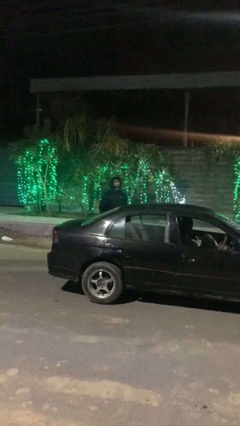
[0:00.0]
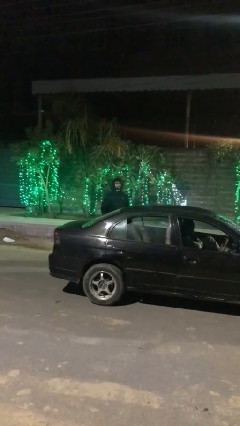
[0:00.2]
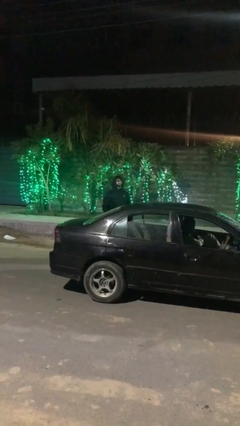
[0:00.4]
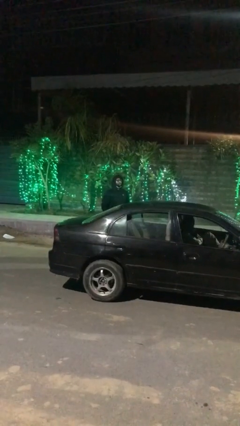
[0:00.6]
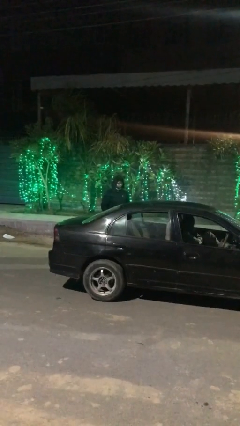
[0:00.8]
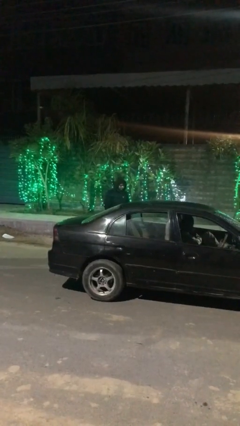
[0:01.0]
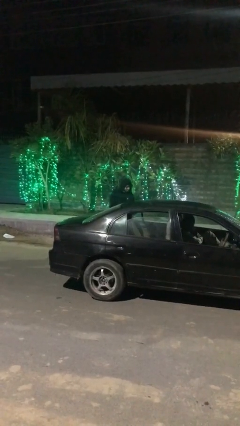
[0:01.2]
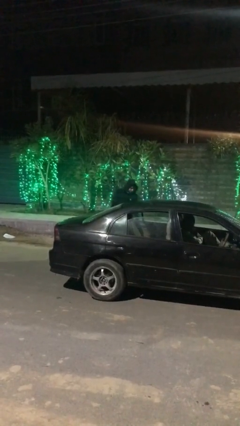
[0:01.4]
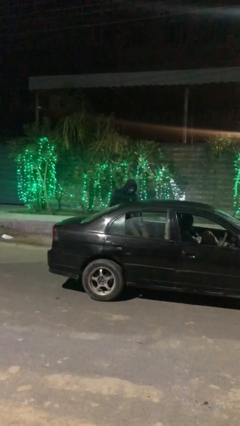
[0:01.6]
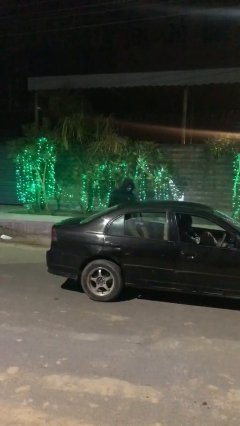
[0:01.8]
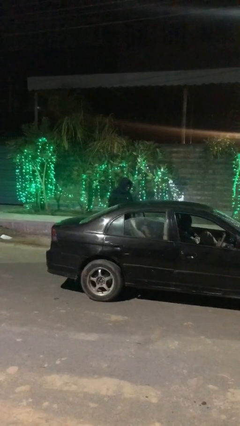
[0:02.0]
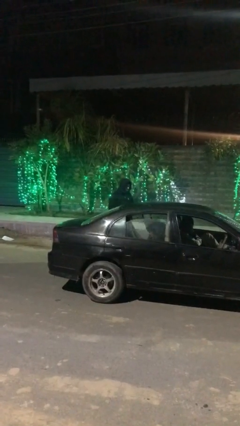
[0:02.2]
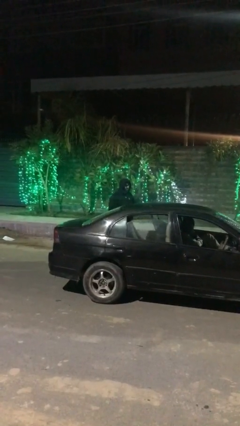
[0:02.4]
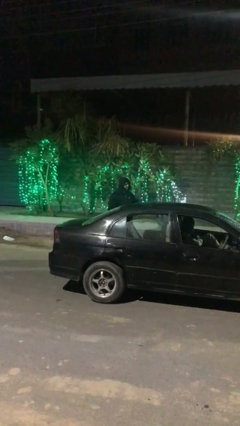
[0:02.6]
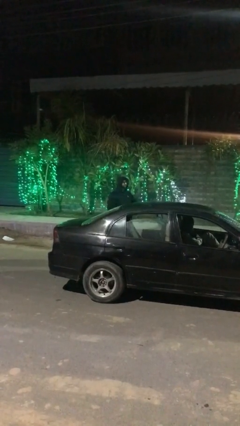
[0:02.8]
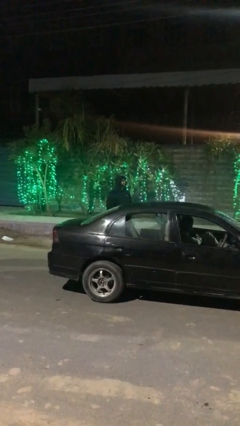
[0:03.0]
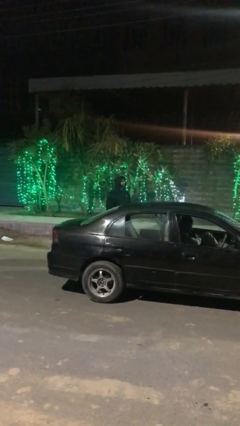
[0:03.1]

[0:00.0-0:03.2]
person opens car door

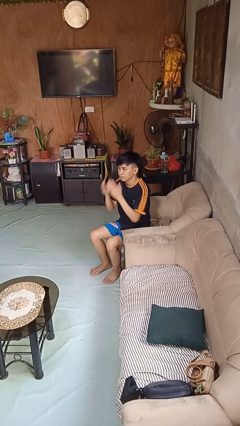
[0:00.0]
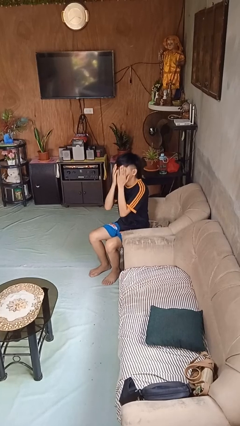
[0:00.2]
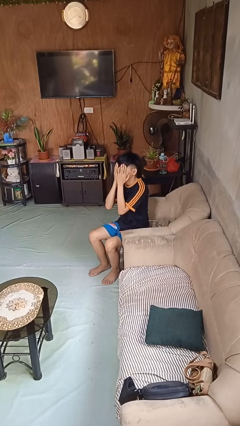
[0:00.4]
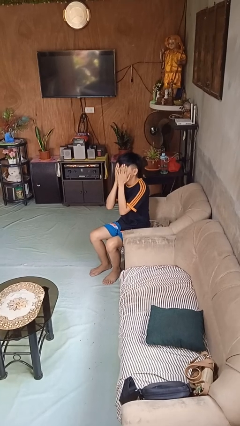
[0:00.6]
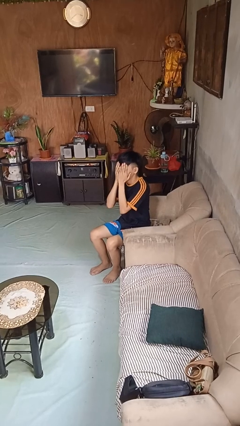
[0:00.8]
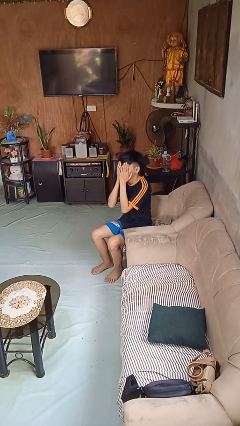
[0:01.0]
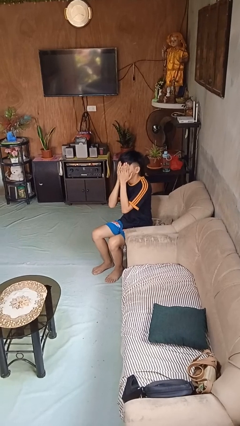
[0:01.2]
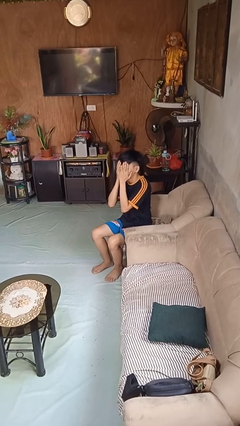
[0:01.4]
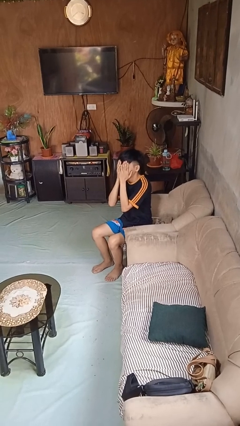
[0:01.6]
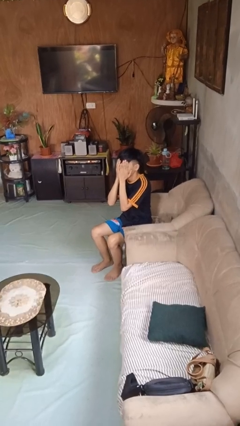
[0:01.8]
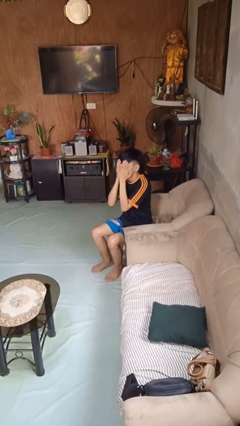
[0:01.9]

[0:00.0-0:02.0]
person covers face with hands

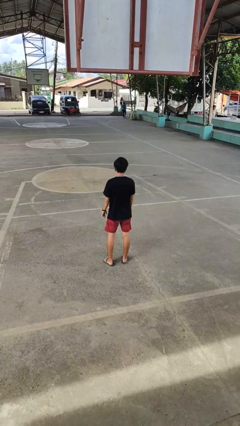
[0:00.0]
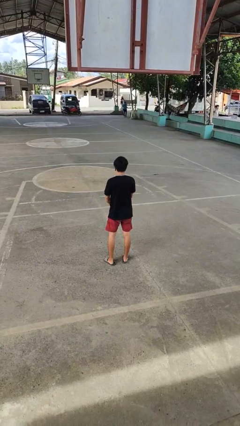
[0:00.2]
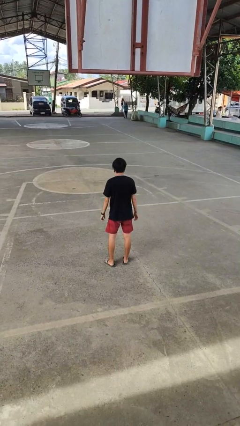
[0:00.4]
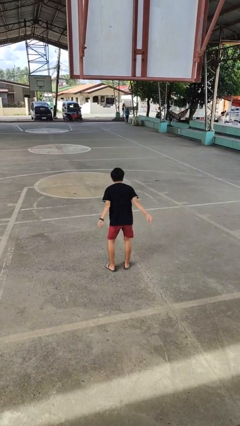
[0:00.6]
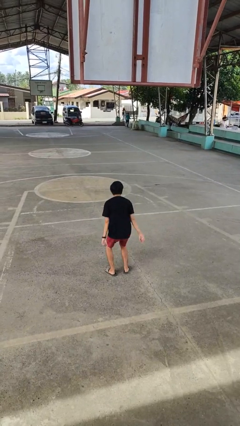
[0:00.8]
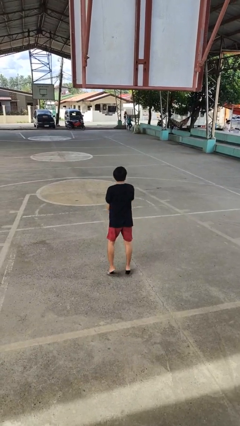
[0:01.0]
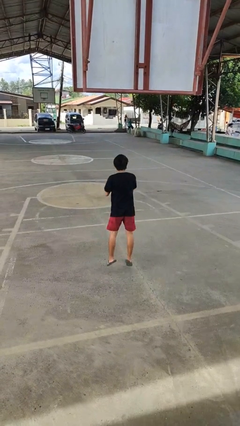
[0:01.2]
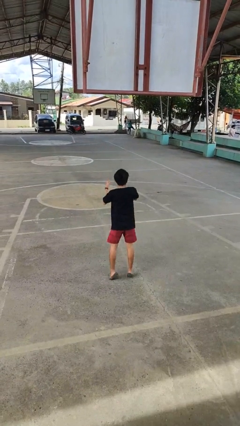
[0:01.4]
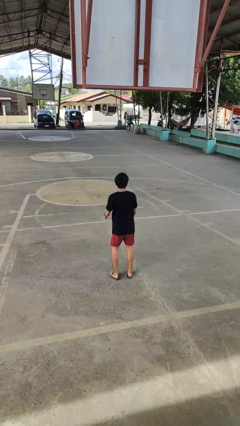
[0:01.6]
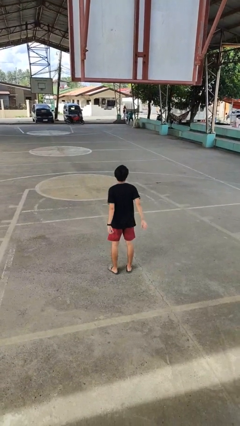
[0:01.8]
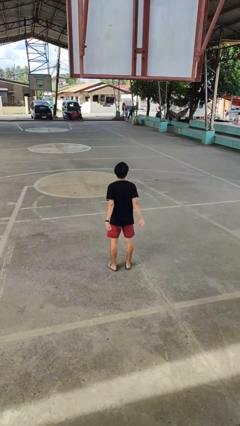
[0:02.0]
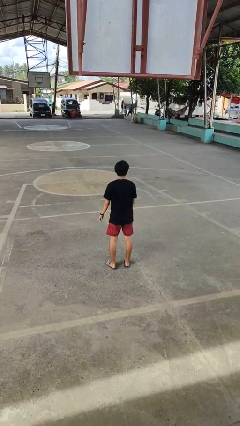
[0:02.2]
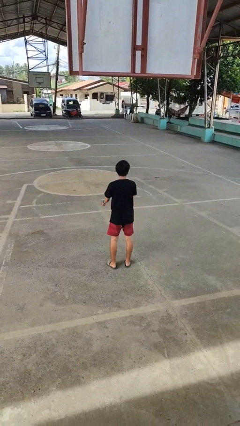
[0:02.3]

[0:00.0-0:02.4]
person jumps

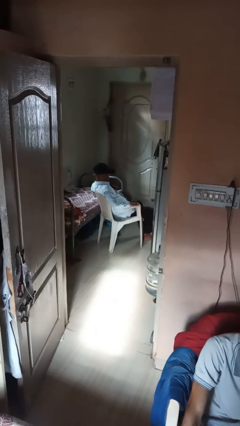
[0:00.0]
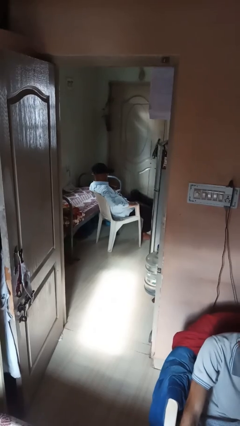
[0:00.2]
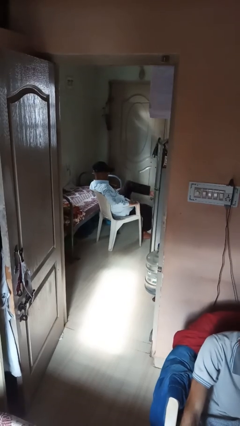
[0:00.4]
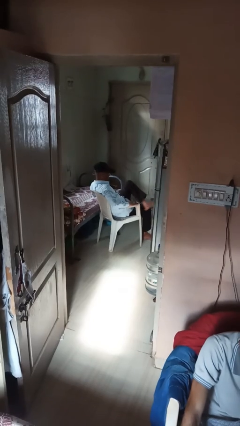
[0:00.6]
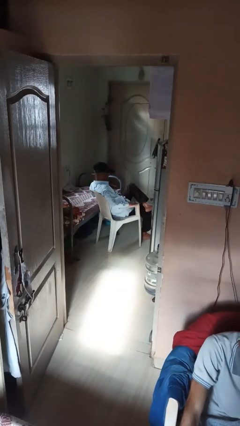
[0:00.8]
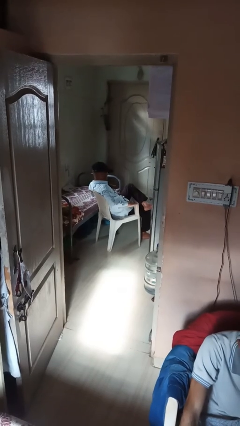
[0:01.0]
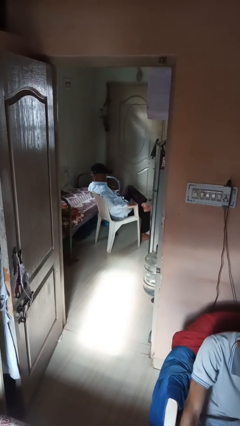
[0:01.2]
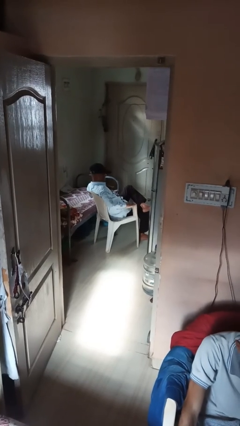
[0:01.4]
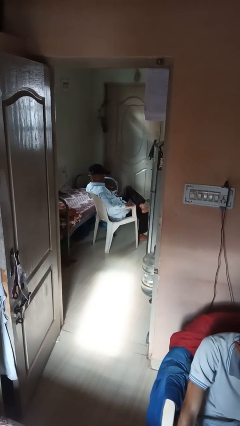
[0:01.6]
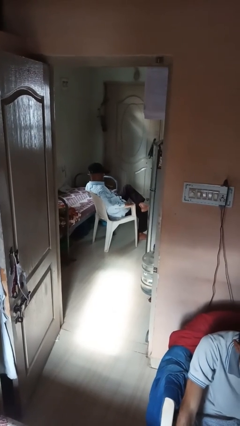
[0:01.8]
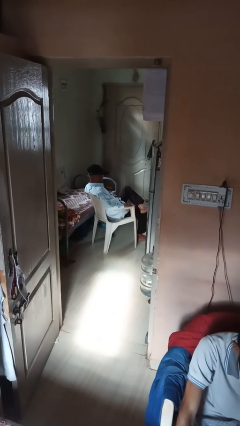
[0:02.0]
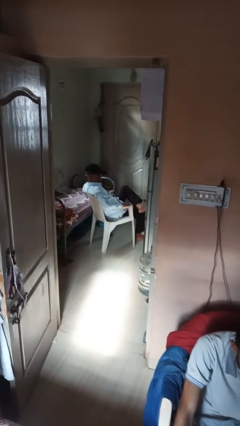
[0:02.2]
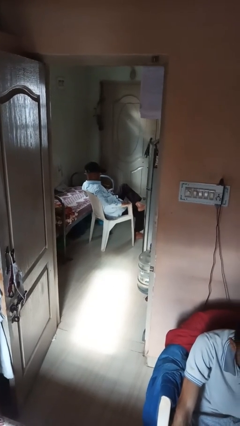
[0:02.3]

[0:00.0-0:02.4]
person crosses legs

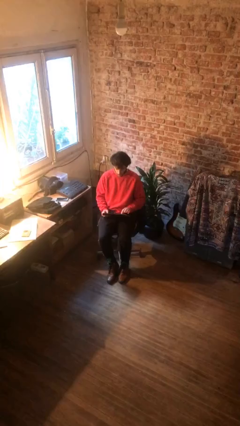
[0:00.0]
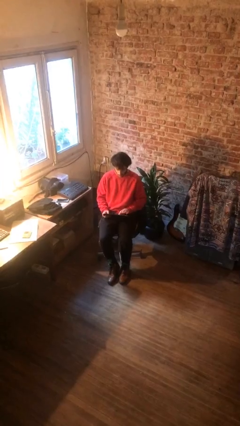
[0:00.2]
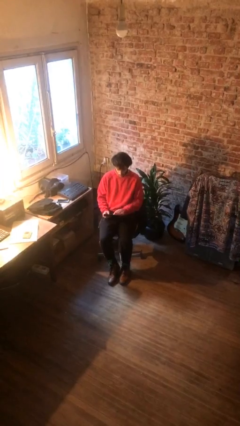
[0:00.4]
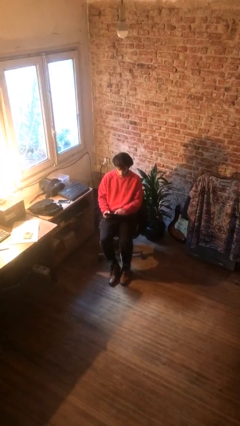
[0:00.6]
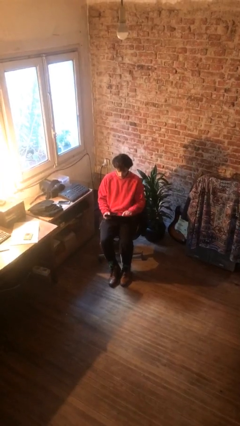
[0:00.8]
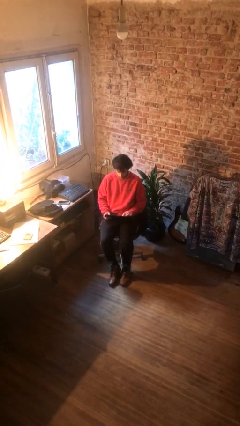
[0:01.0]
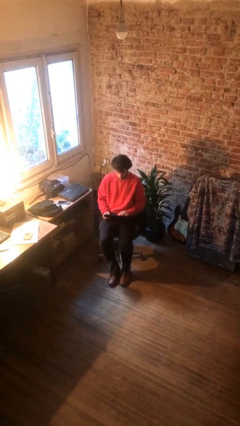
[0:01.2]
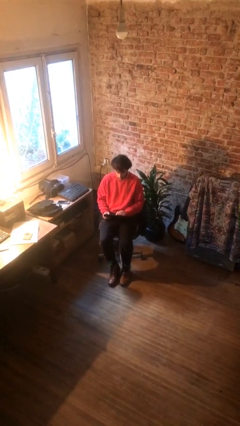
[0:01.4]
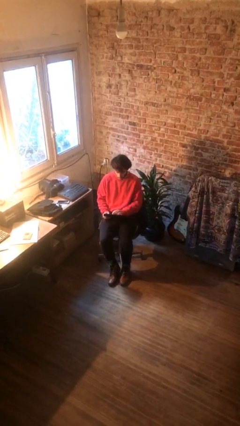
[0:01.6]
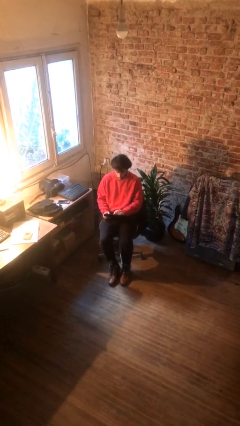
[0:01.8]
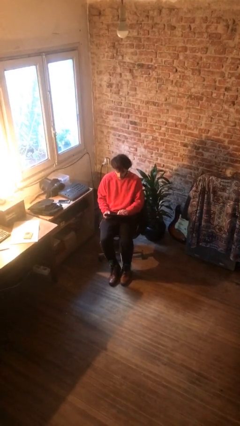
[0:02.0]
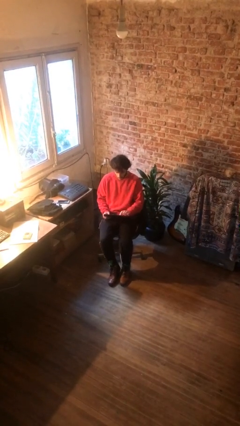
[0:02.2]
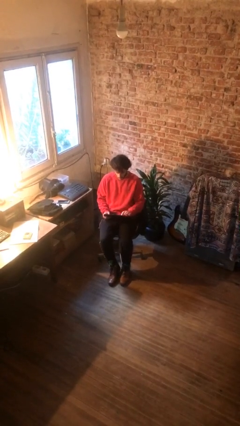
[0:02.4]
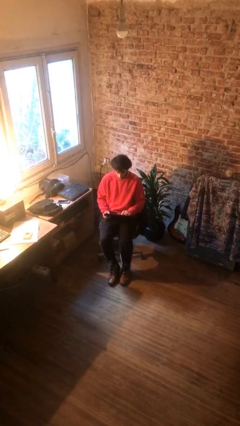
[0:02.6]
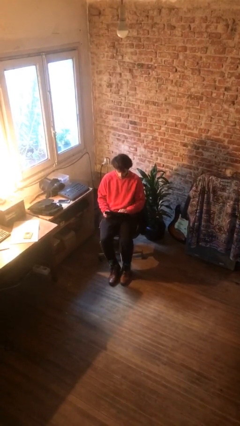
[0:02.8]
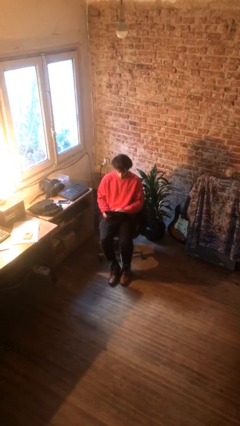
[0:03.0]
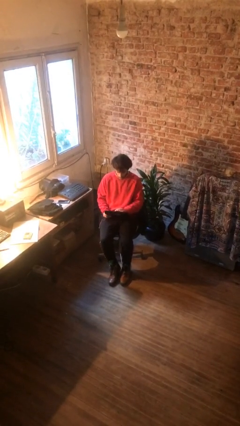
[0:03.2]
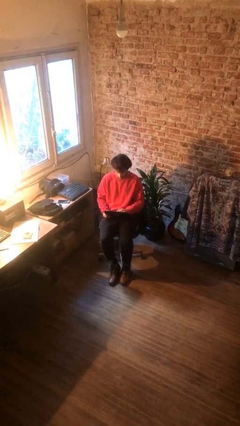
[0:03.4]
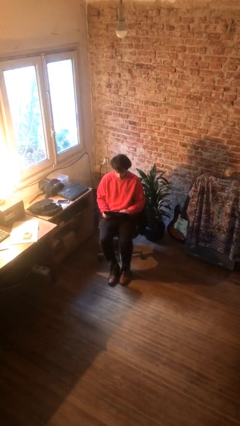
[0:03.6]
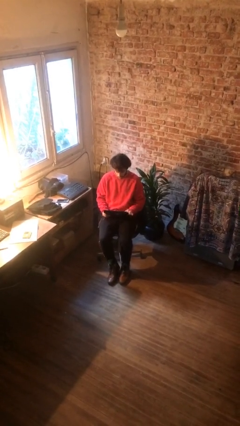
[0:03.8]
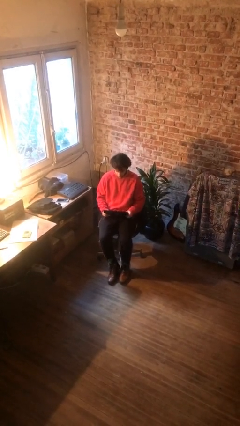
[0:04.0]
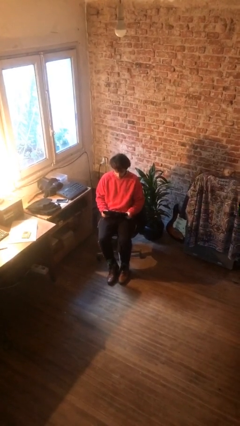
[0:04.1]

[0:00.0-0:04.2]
person interacts with tablet

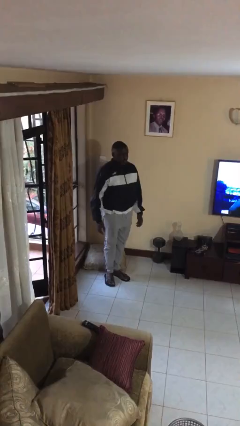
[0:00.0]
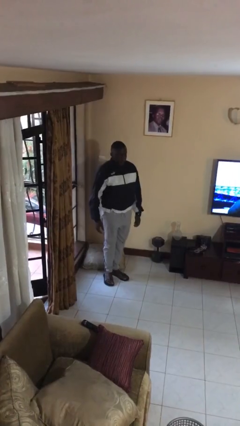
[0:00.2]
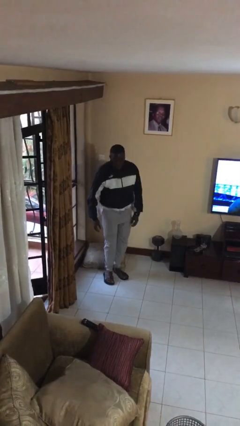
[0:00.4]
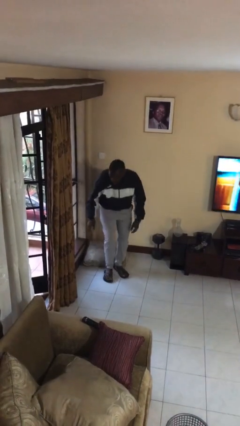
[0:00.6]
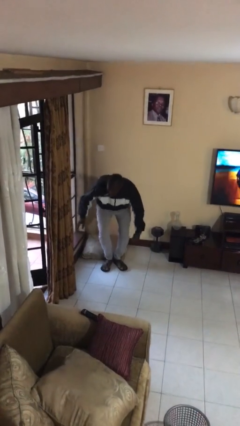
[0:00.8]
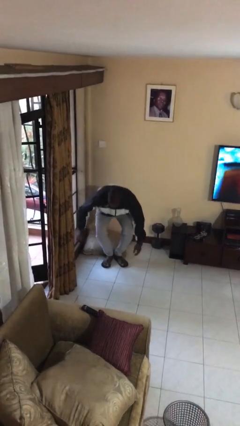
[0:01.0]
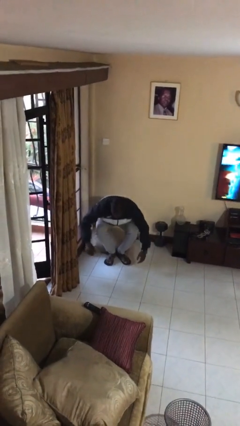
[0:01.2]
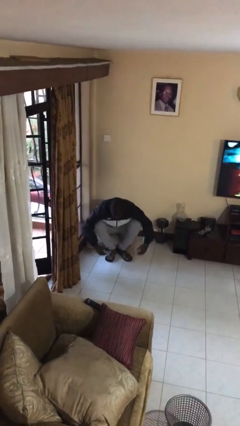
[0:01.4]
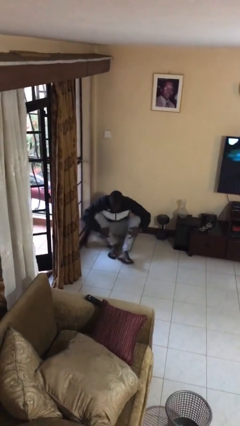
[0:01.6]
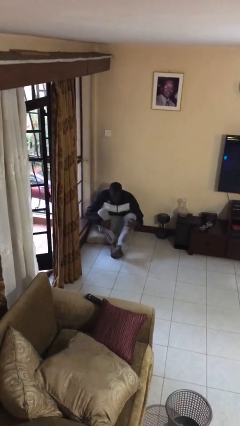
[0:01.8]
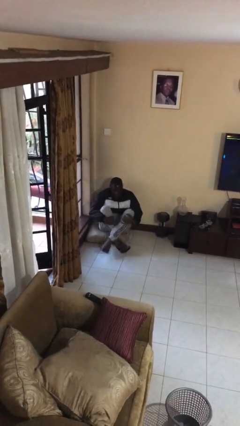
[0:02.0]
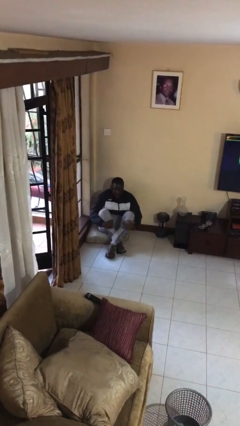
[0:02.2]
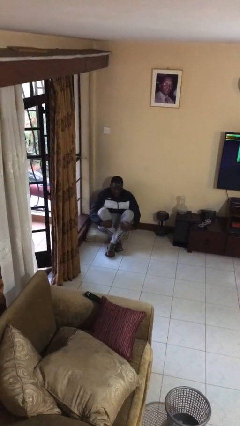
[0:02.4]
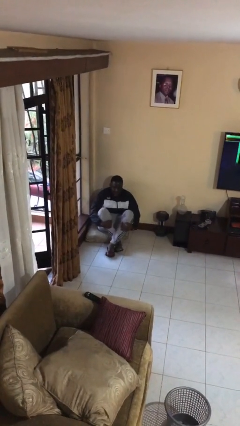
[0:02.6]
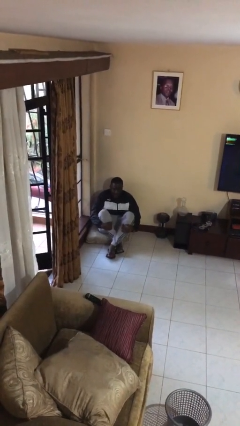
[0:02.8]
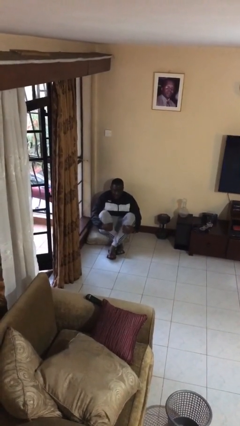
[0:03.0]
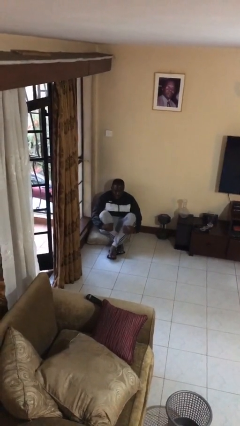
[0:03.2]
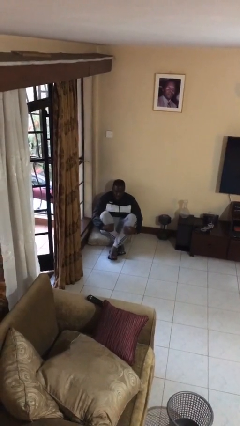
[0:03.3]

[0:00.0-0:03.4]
person sits crisscross
